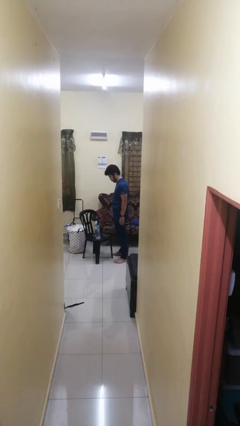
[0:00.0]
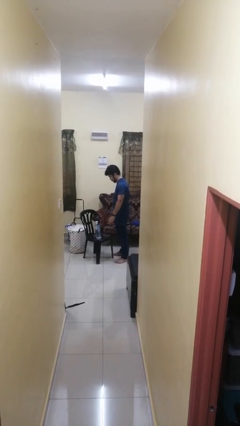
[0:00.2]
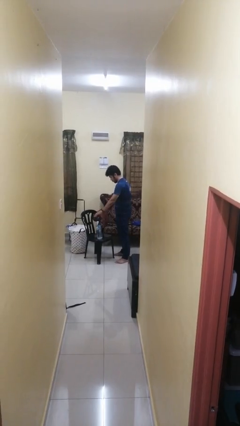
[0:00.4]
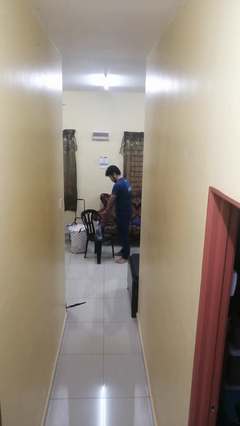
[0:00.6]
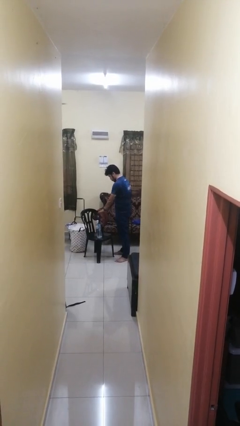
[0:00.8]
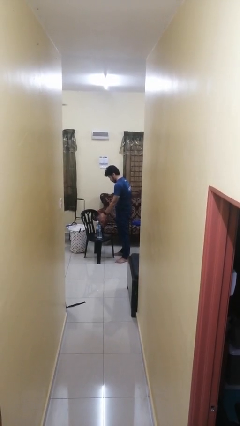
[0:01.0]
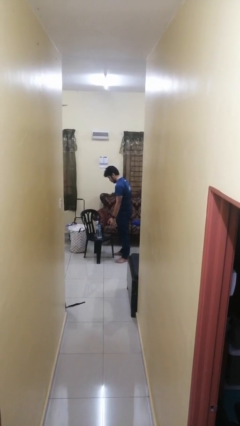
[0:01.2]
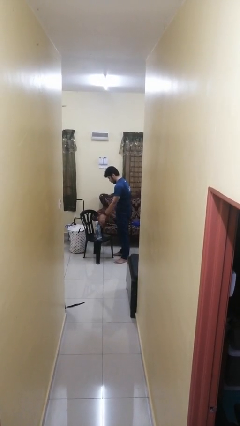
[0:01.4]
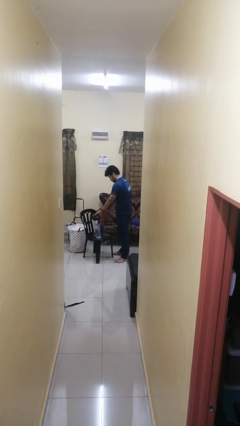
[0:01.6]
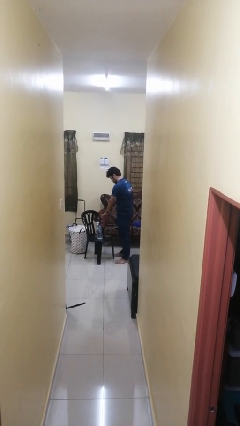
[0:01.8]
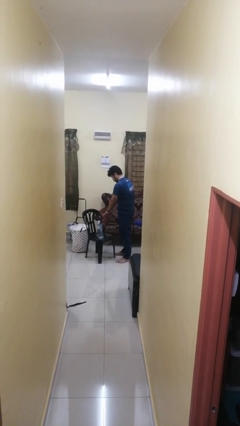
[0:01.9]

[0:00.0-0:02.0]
person waves hand over object

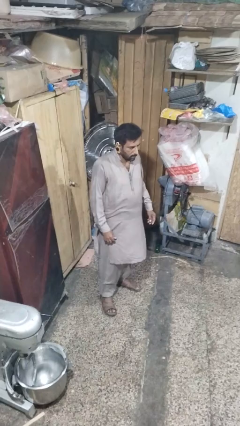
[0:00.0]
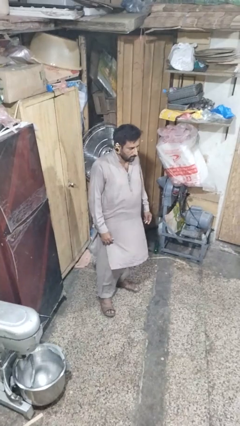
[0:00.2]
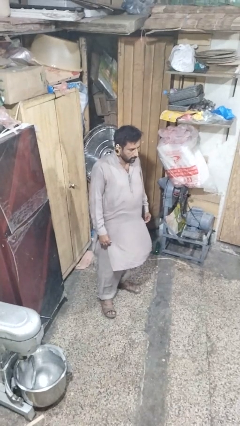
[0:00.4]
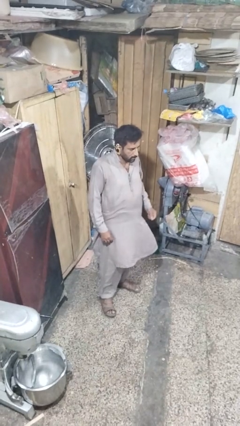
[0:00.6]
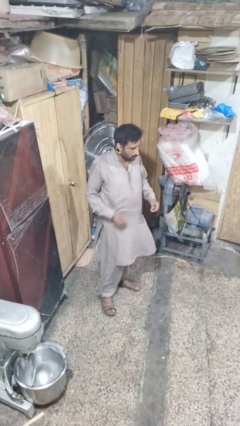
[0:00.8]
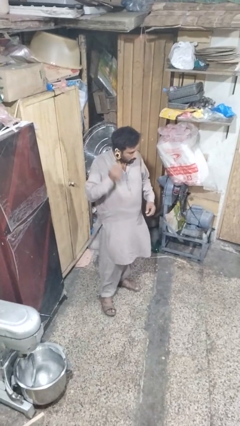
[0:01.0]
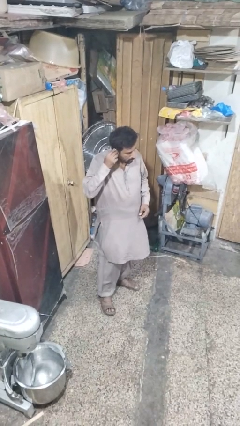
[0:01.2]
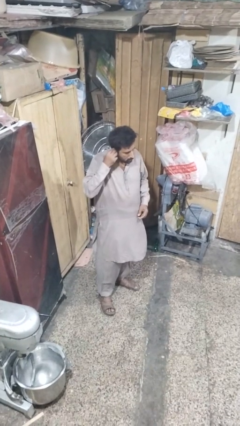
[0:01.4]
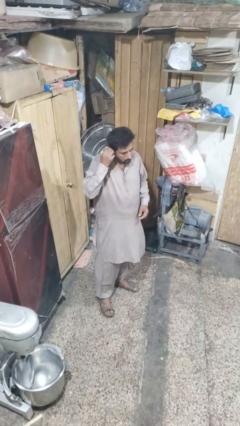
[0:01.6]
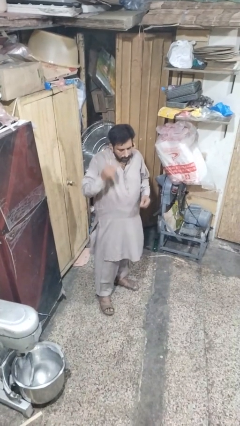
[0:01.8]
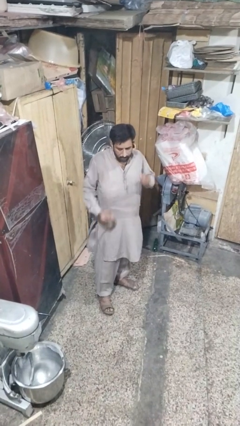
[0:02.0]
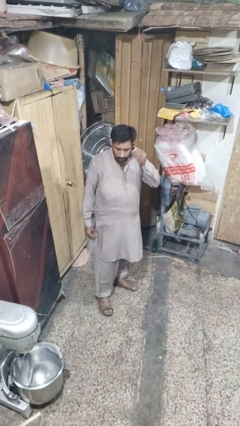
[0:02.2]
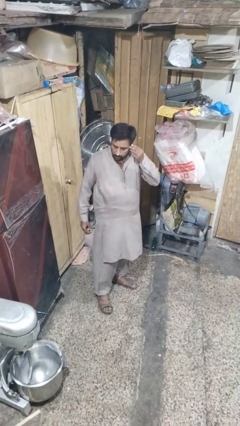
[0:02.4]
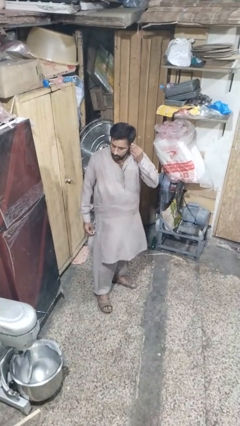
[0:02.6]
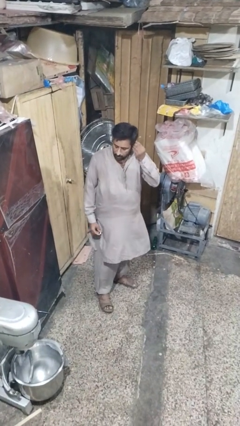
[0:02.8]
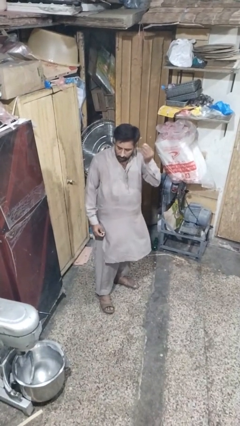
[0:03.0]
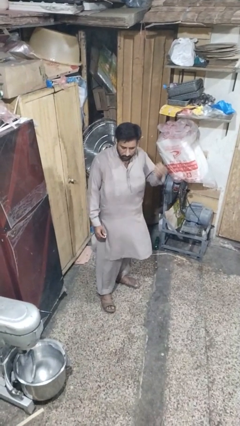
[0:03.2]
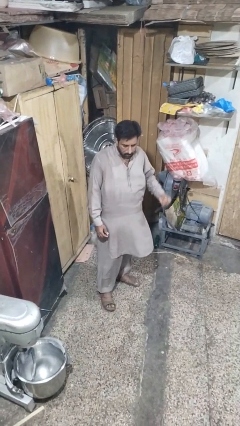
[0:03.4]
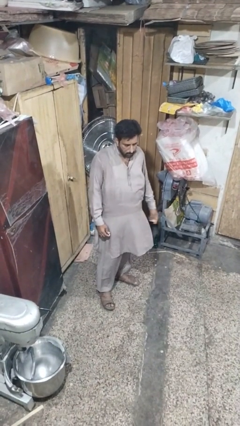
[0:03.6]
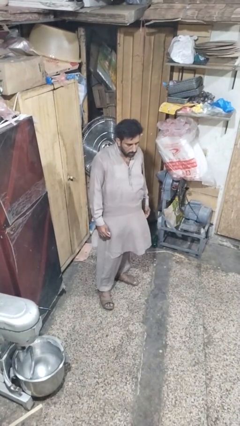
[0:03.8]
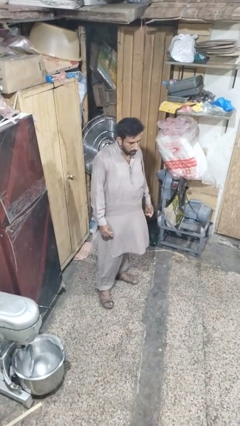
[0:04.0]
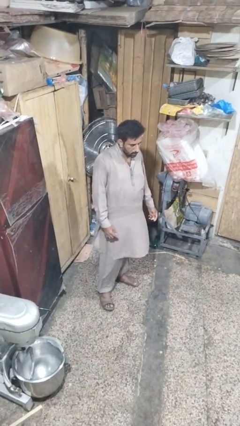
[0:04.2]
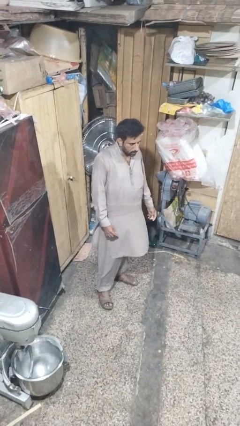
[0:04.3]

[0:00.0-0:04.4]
person takes off earrings

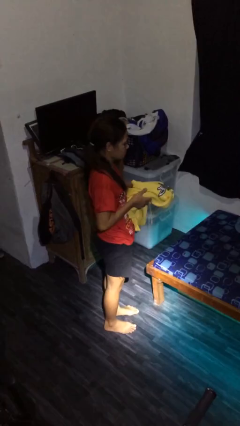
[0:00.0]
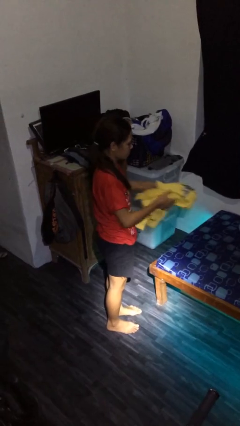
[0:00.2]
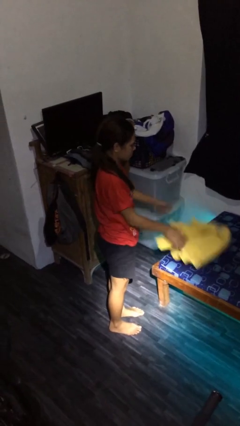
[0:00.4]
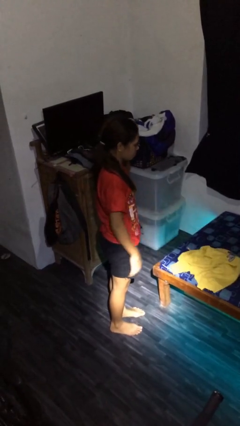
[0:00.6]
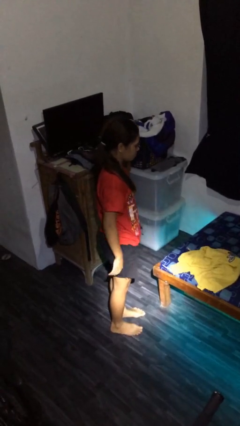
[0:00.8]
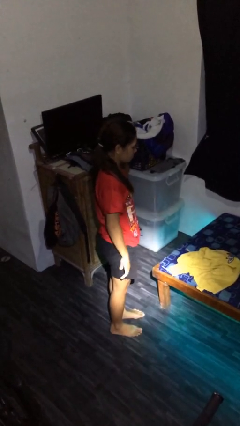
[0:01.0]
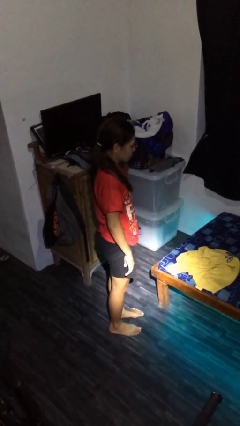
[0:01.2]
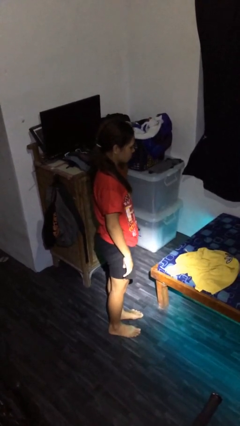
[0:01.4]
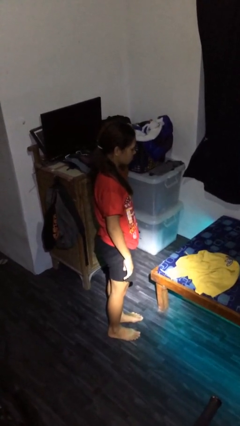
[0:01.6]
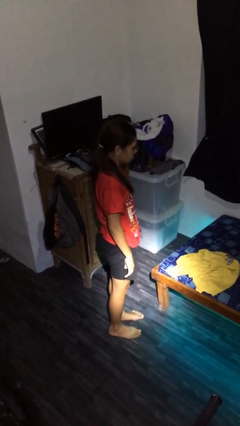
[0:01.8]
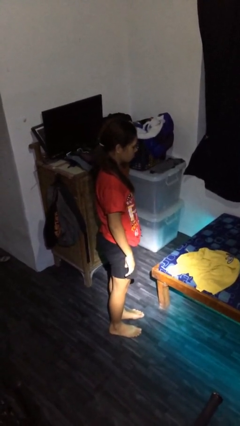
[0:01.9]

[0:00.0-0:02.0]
person throws object on bed

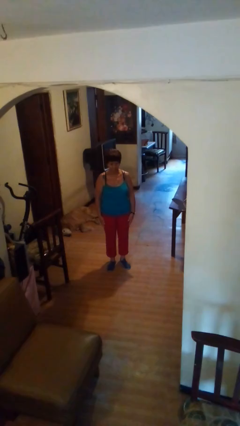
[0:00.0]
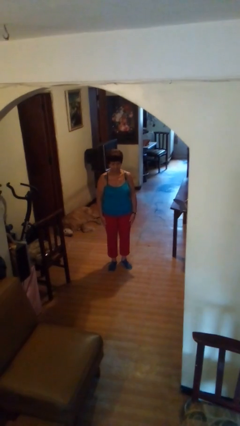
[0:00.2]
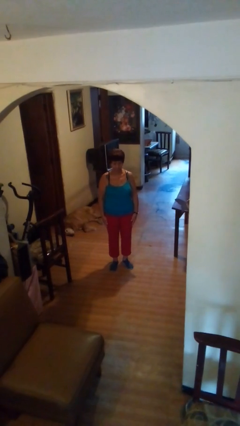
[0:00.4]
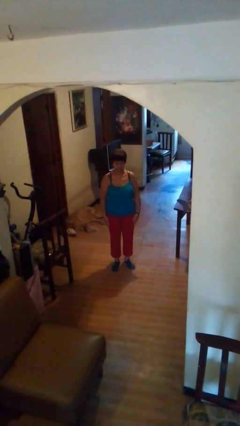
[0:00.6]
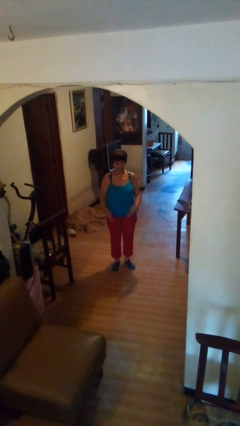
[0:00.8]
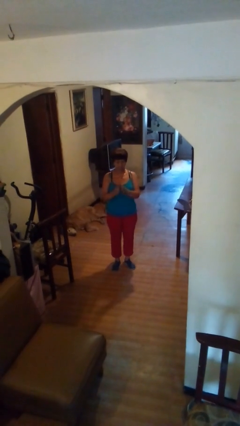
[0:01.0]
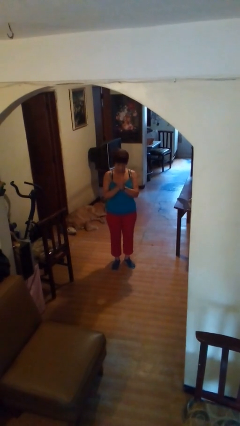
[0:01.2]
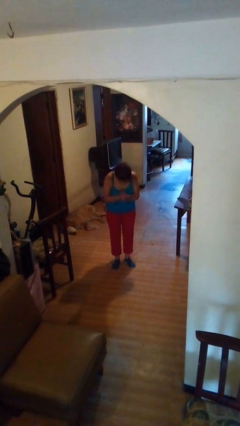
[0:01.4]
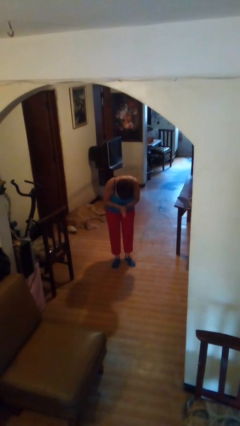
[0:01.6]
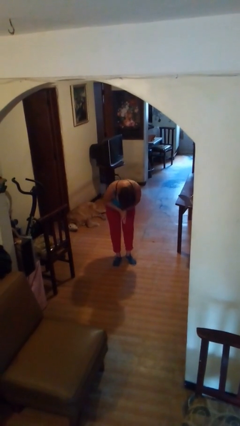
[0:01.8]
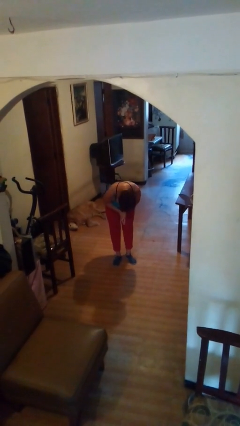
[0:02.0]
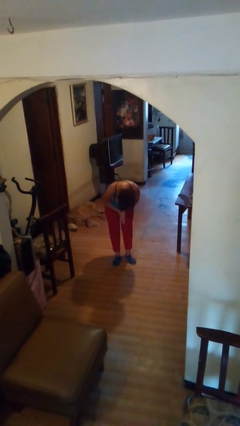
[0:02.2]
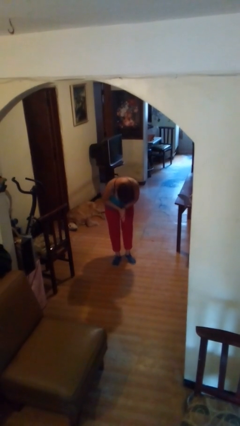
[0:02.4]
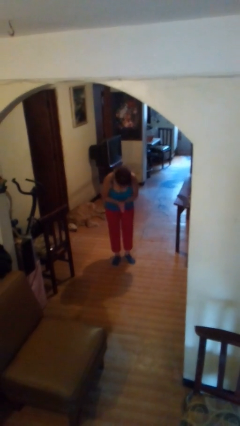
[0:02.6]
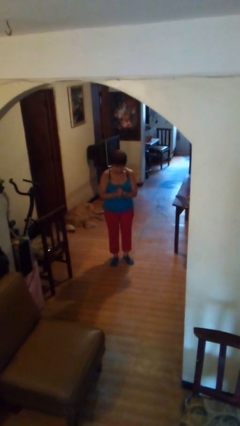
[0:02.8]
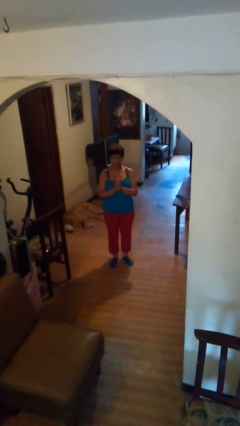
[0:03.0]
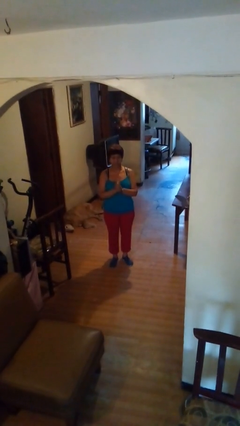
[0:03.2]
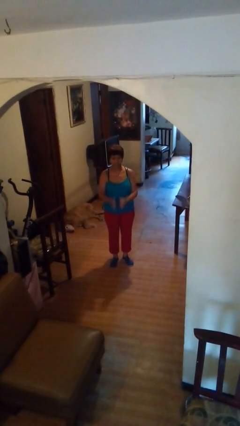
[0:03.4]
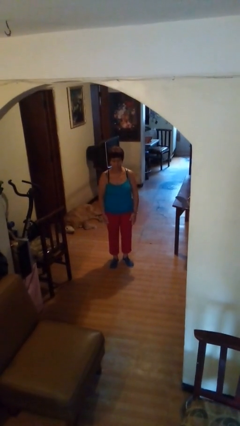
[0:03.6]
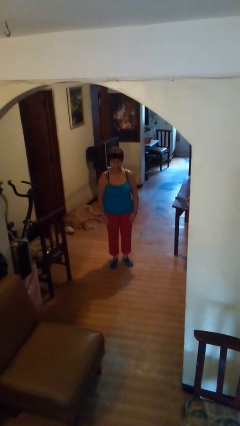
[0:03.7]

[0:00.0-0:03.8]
person bows

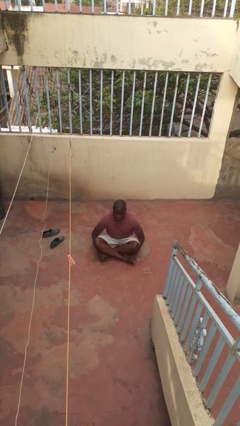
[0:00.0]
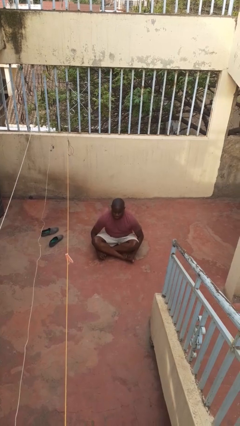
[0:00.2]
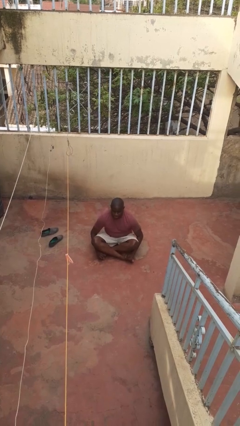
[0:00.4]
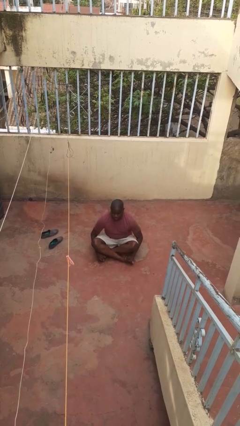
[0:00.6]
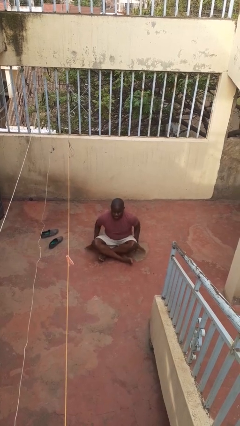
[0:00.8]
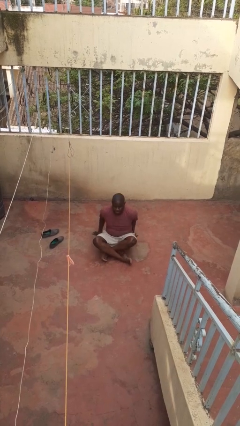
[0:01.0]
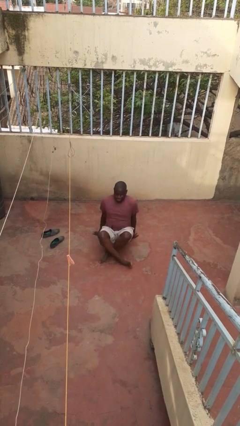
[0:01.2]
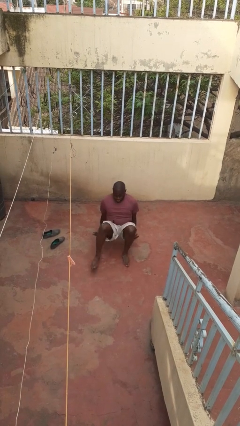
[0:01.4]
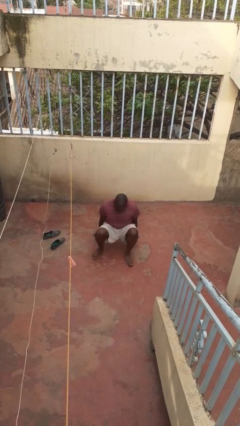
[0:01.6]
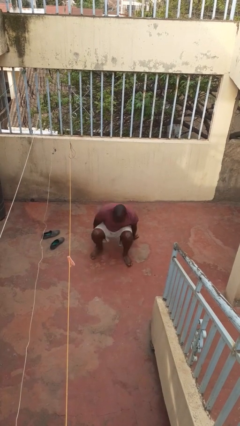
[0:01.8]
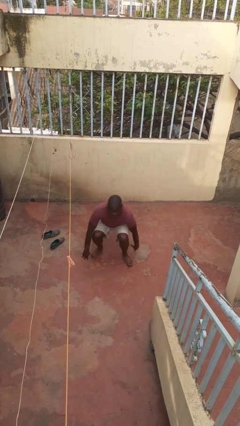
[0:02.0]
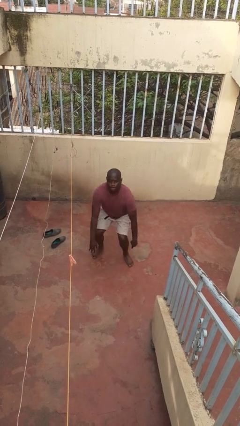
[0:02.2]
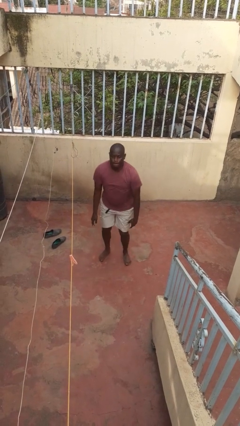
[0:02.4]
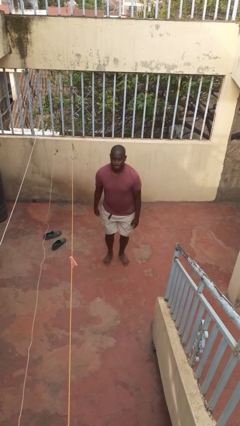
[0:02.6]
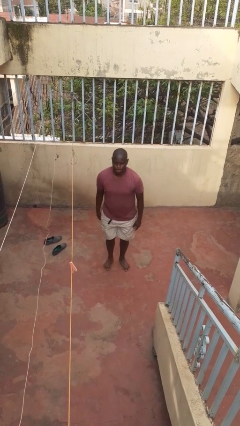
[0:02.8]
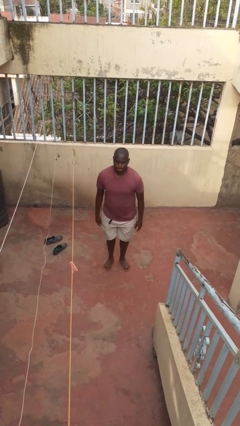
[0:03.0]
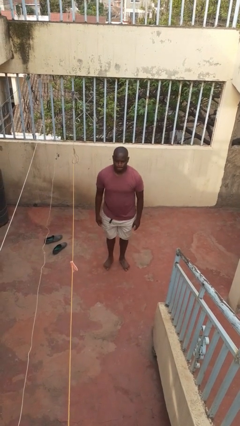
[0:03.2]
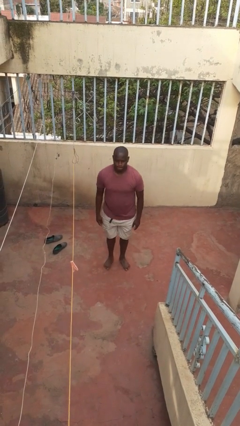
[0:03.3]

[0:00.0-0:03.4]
person stands up from floor

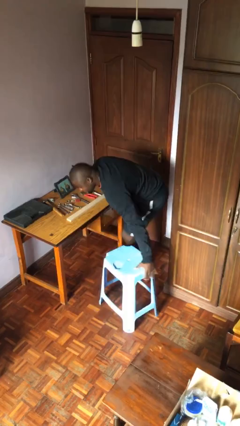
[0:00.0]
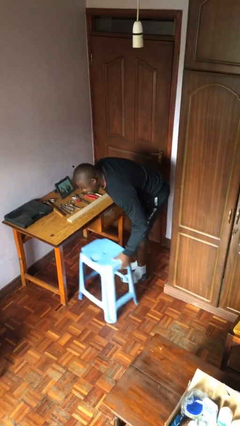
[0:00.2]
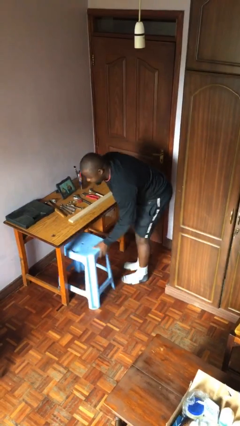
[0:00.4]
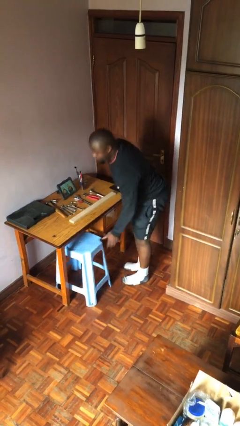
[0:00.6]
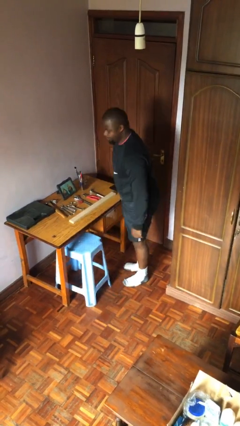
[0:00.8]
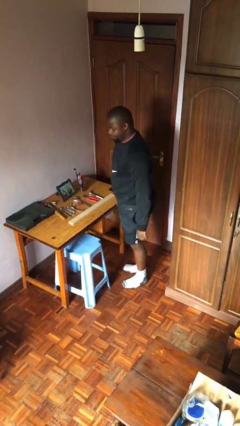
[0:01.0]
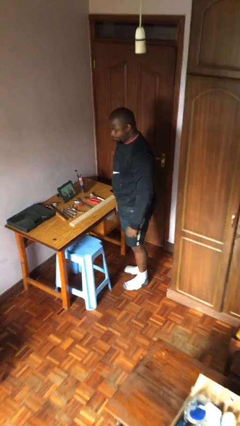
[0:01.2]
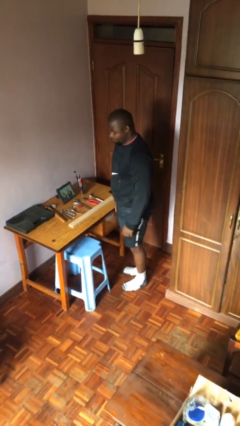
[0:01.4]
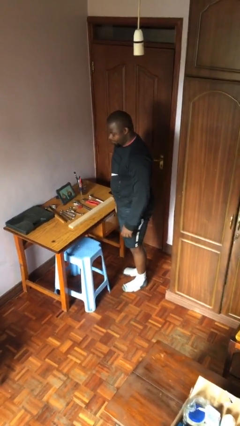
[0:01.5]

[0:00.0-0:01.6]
person stands up
